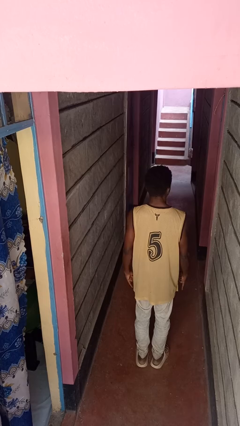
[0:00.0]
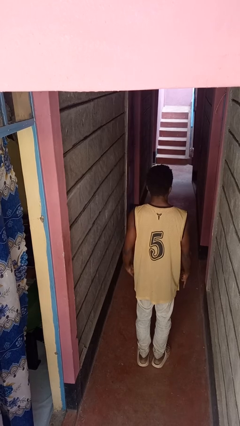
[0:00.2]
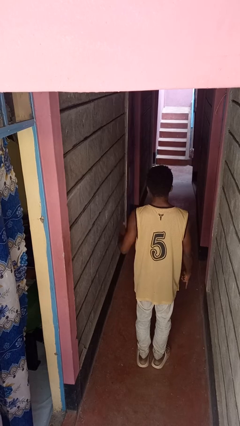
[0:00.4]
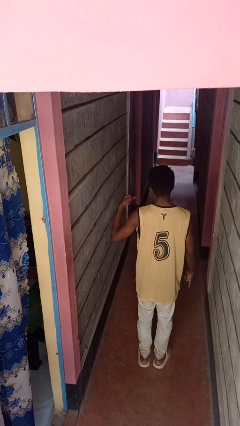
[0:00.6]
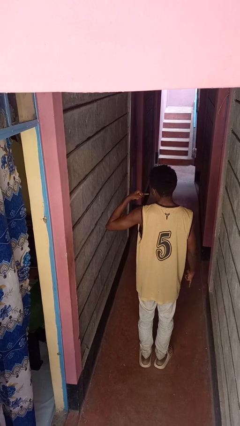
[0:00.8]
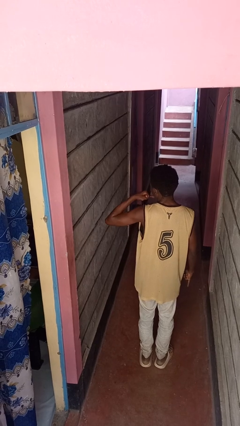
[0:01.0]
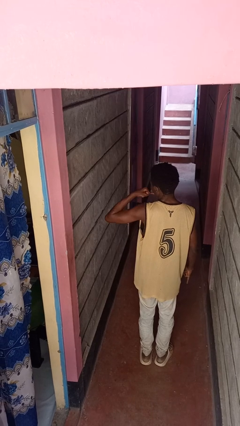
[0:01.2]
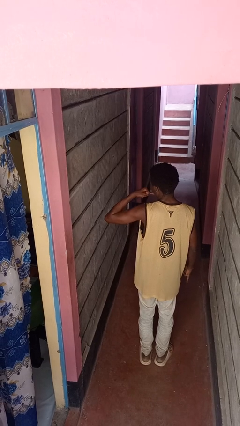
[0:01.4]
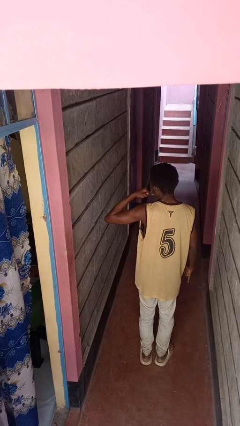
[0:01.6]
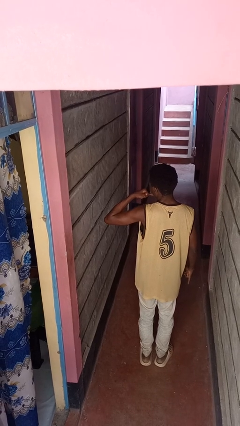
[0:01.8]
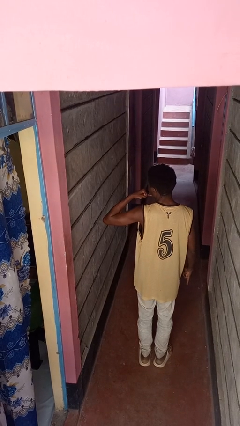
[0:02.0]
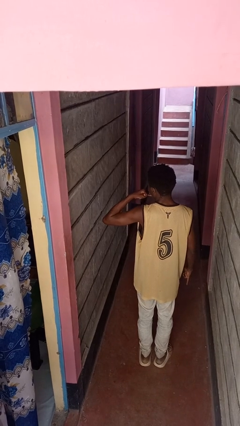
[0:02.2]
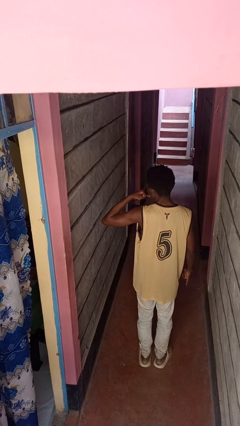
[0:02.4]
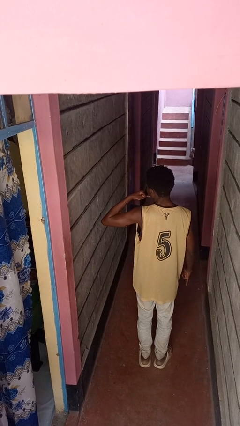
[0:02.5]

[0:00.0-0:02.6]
person gestures call me

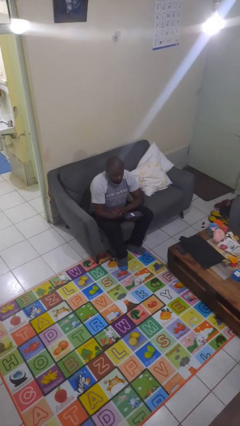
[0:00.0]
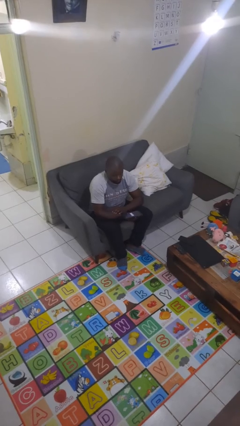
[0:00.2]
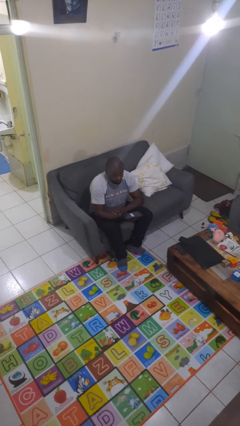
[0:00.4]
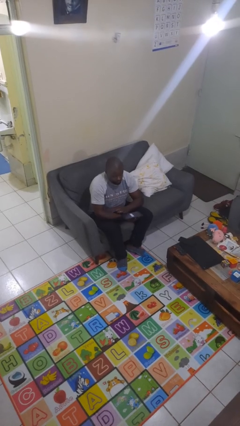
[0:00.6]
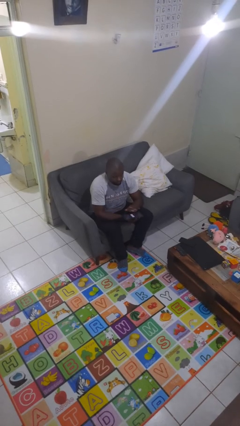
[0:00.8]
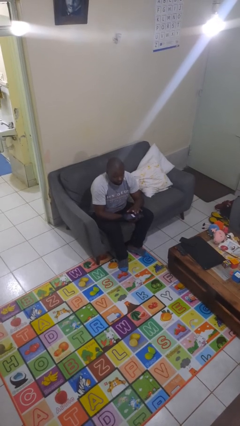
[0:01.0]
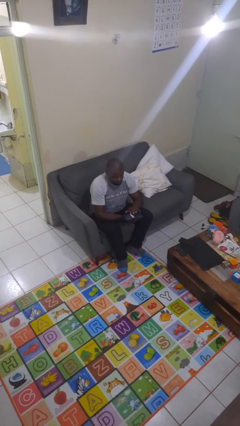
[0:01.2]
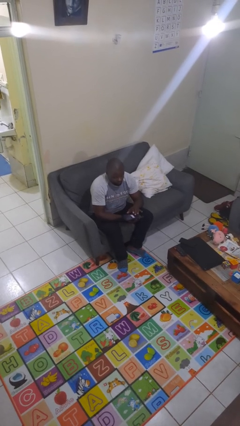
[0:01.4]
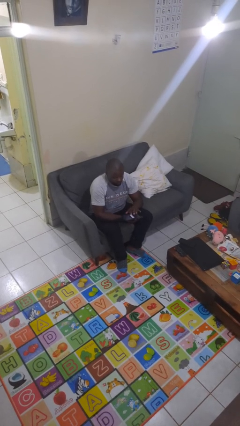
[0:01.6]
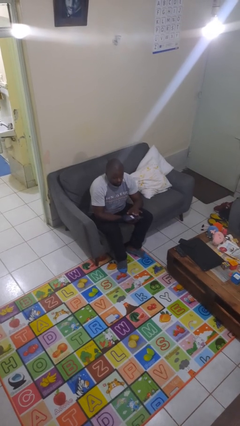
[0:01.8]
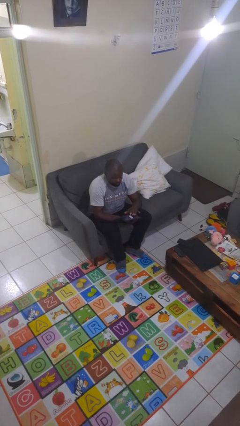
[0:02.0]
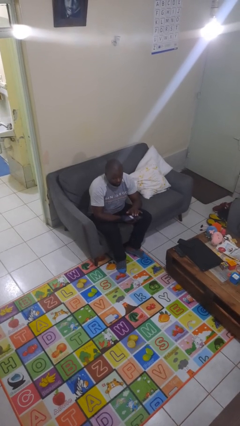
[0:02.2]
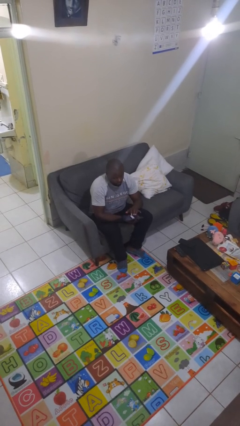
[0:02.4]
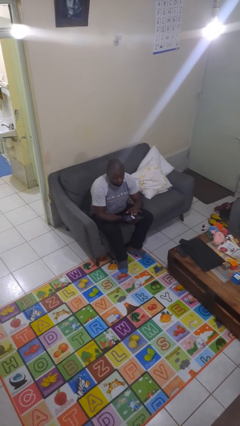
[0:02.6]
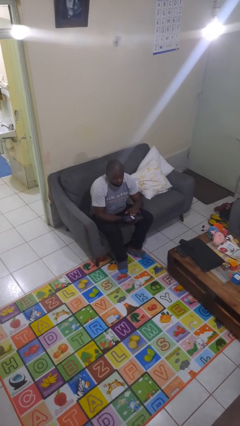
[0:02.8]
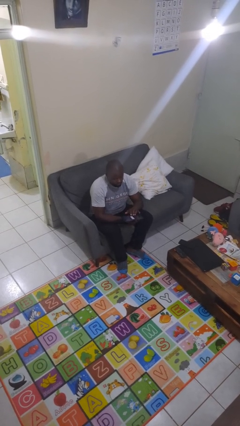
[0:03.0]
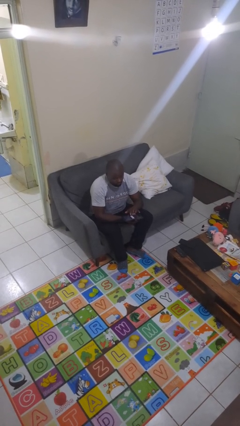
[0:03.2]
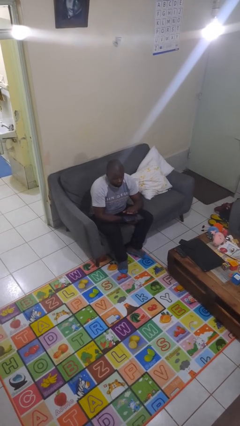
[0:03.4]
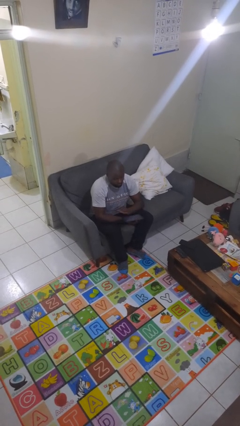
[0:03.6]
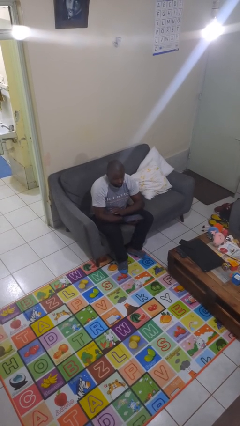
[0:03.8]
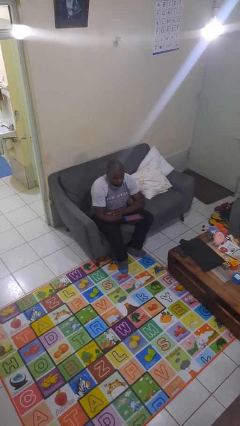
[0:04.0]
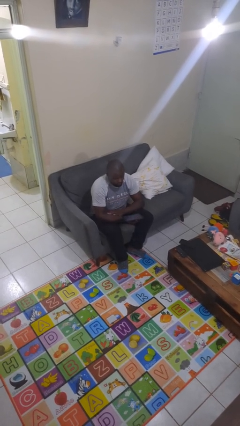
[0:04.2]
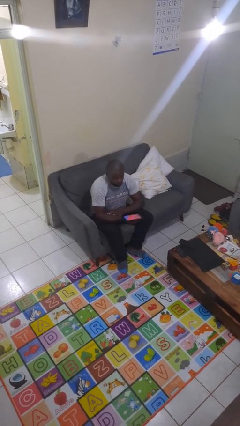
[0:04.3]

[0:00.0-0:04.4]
person interacts with tablet

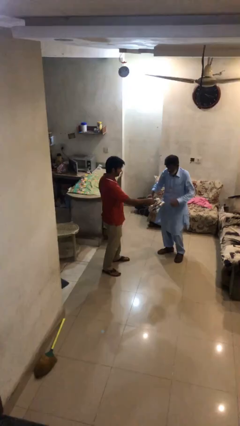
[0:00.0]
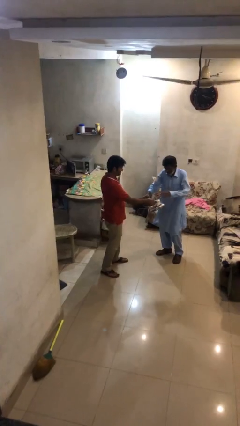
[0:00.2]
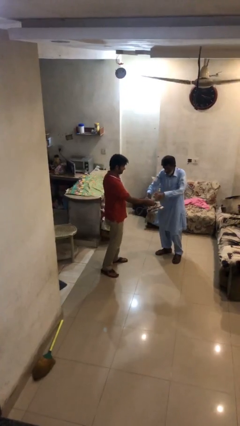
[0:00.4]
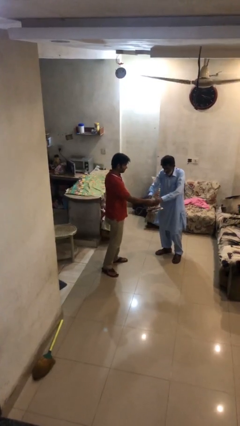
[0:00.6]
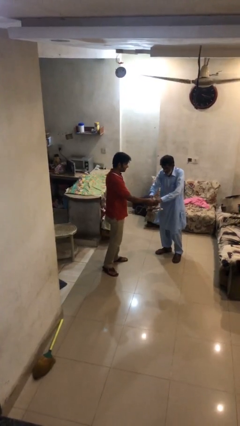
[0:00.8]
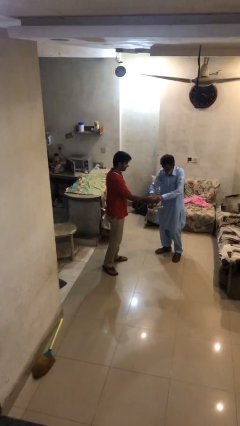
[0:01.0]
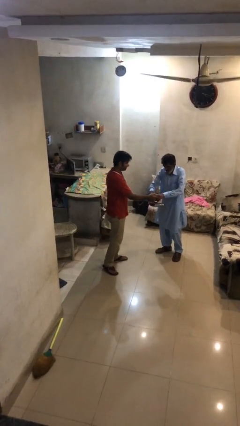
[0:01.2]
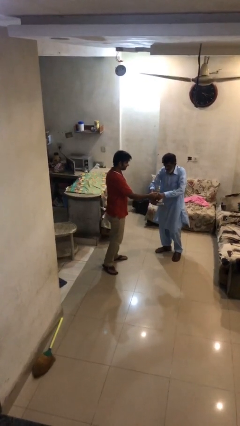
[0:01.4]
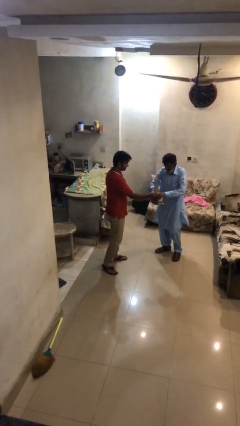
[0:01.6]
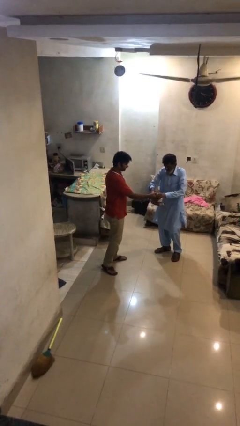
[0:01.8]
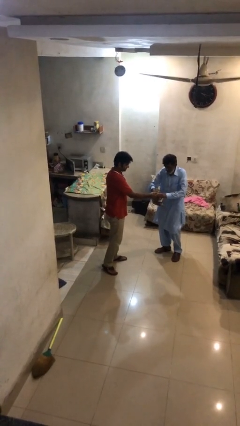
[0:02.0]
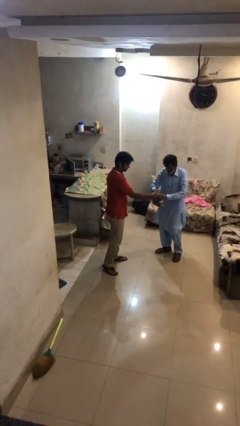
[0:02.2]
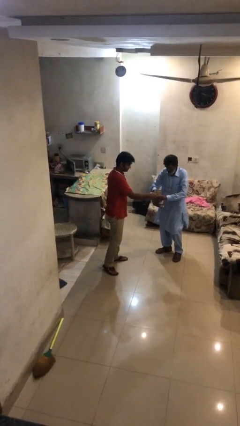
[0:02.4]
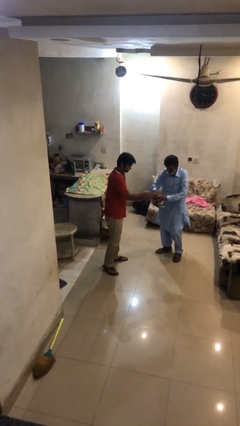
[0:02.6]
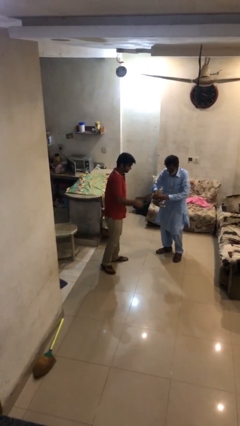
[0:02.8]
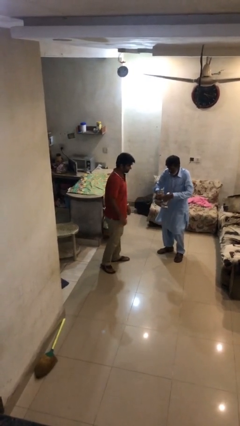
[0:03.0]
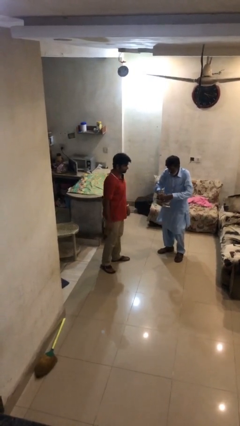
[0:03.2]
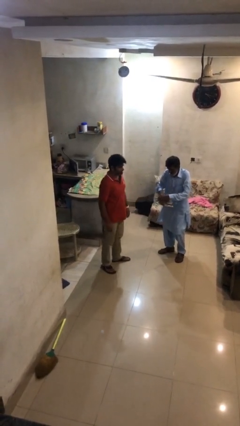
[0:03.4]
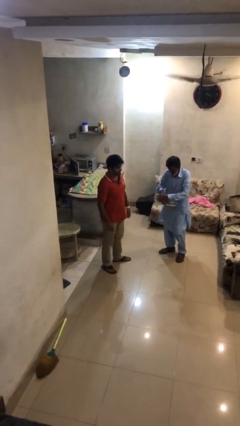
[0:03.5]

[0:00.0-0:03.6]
person transfers object to person

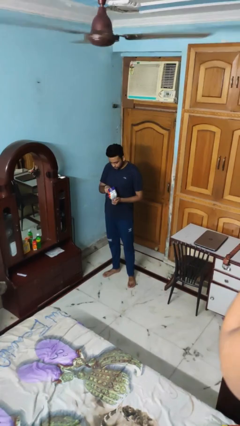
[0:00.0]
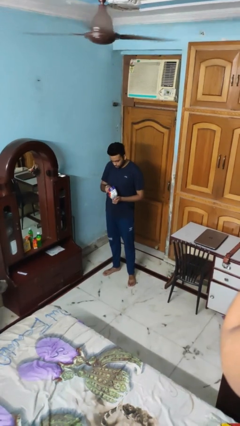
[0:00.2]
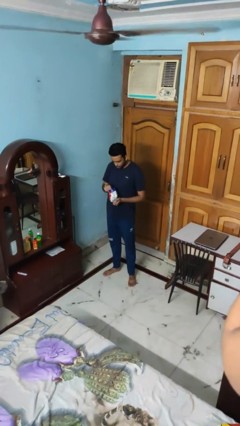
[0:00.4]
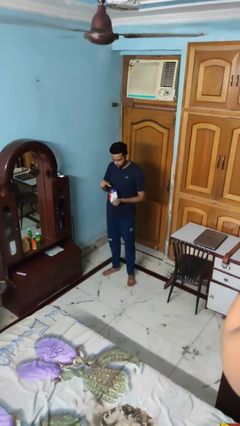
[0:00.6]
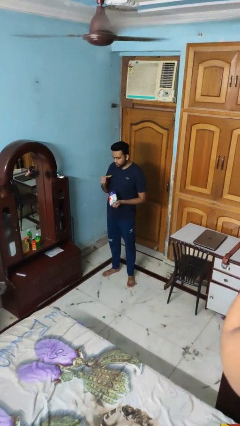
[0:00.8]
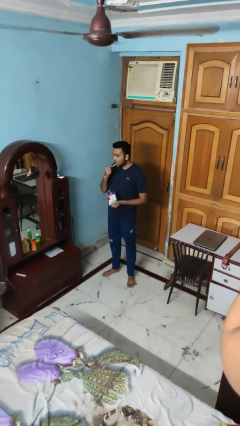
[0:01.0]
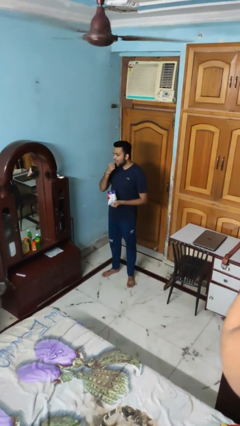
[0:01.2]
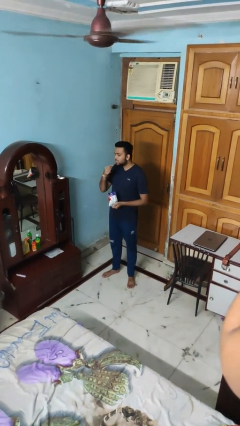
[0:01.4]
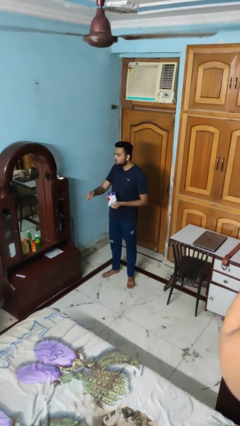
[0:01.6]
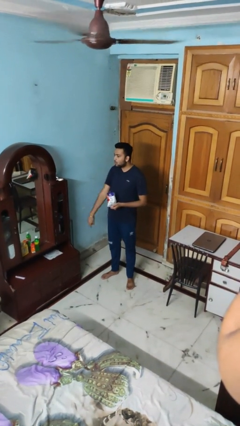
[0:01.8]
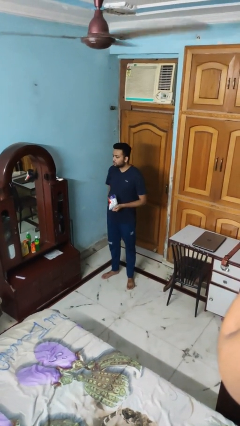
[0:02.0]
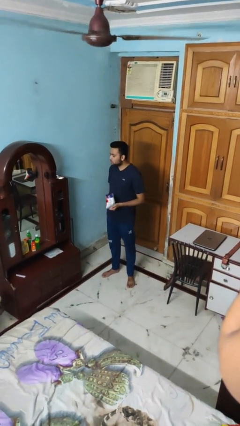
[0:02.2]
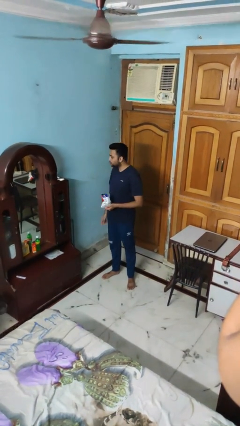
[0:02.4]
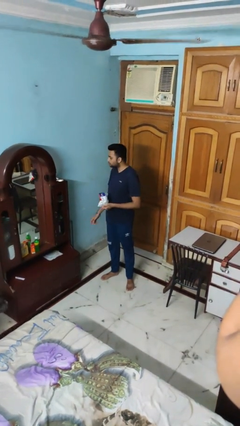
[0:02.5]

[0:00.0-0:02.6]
person eats snack from bag

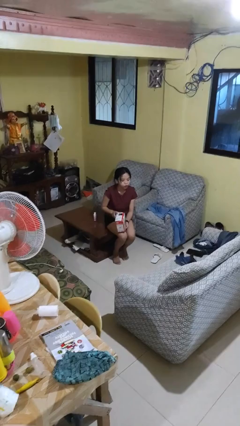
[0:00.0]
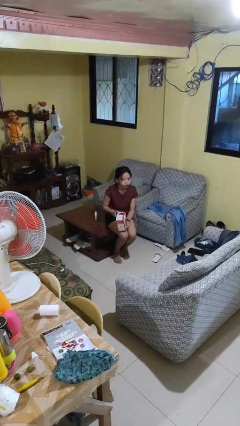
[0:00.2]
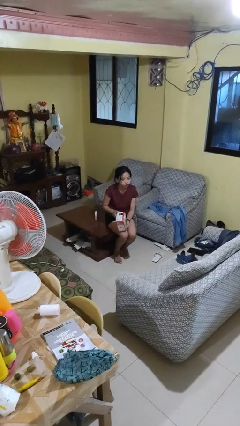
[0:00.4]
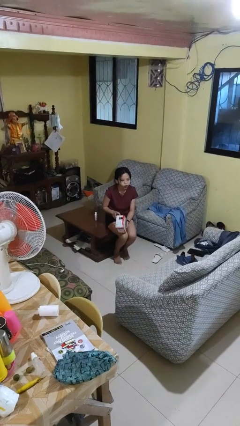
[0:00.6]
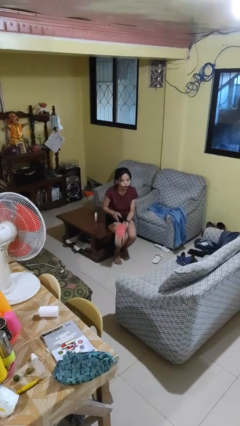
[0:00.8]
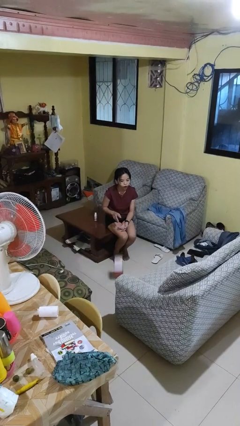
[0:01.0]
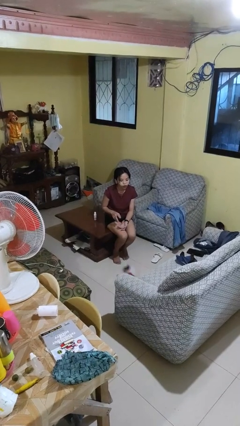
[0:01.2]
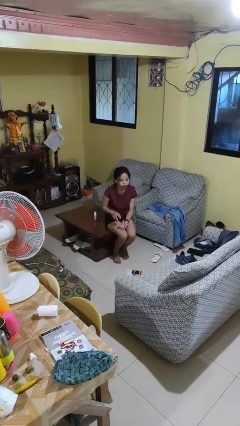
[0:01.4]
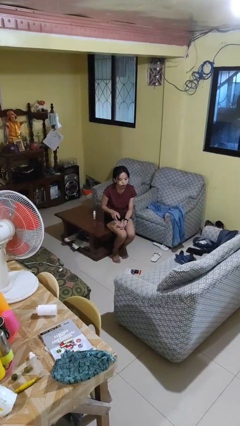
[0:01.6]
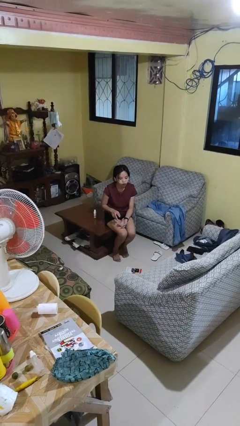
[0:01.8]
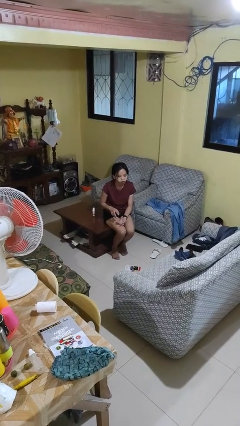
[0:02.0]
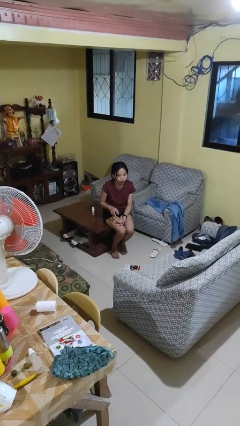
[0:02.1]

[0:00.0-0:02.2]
person drops object

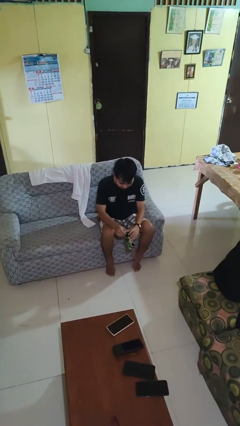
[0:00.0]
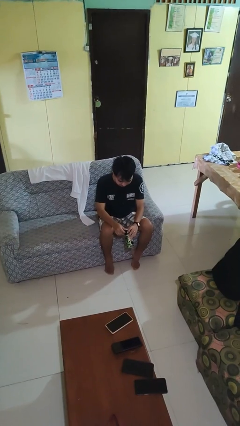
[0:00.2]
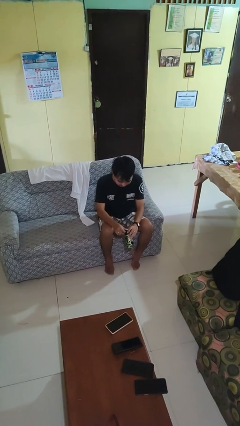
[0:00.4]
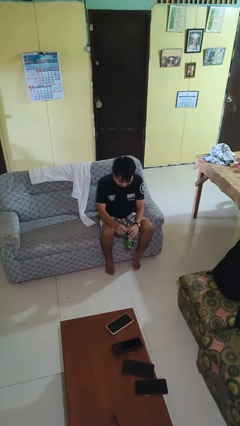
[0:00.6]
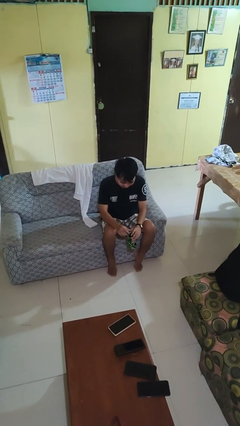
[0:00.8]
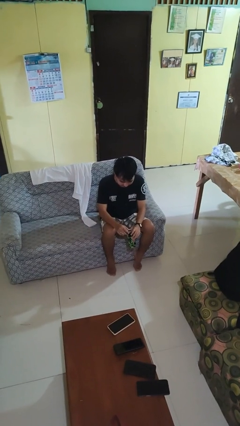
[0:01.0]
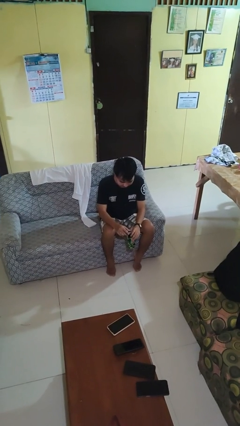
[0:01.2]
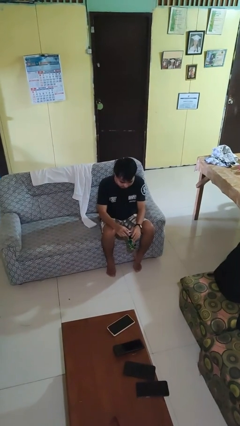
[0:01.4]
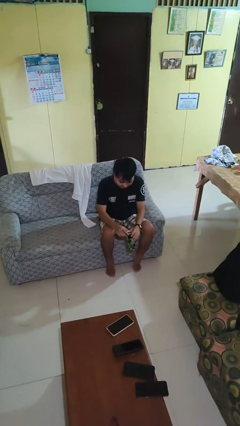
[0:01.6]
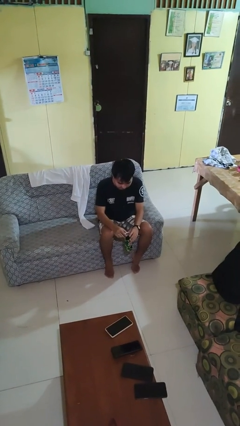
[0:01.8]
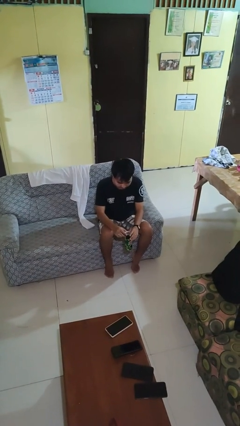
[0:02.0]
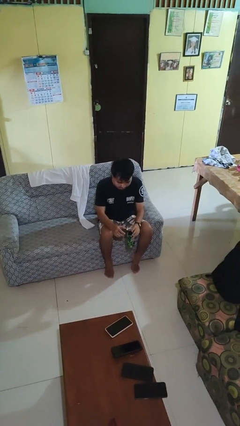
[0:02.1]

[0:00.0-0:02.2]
person opens beverage can
